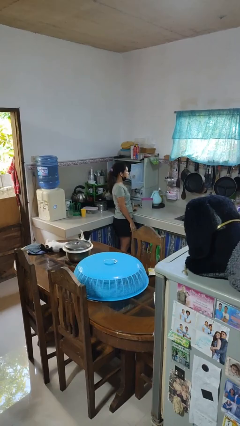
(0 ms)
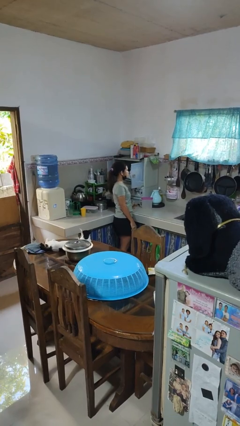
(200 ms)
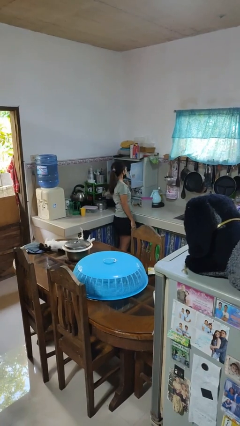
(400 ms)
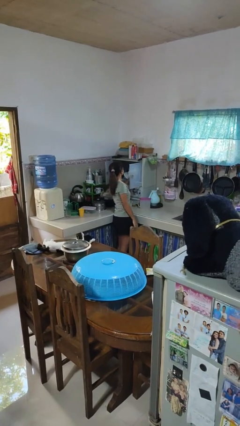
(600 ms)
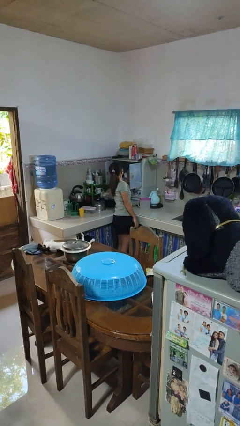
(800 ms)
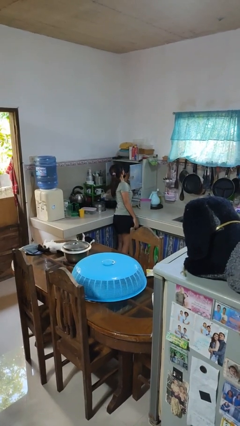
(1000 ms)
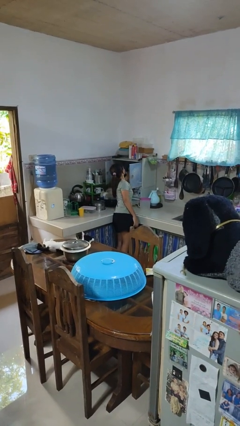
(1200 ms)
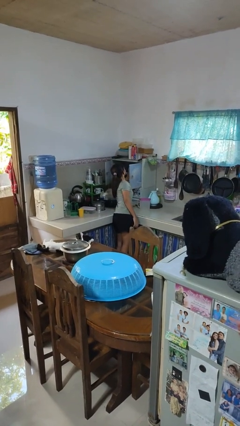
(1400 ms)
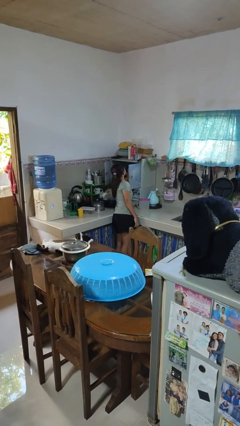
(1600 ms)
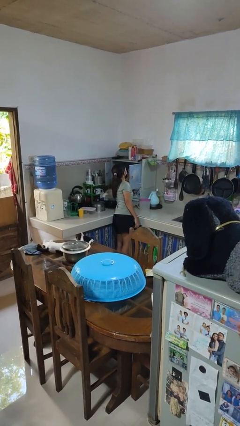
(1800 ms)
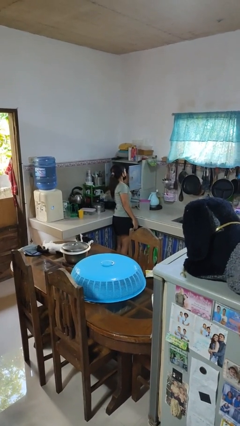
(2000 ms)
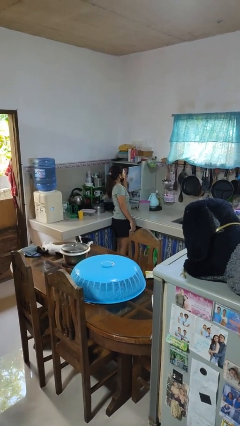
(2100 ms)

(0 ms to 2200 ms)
person searches in kitchen drawer

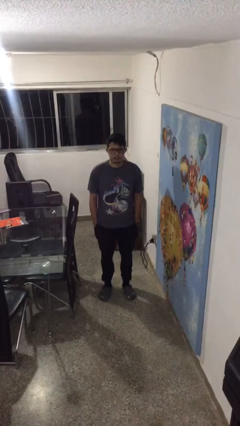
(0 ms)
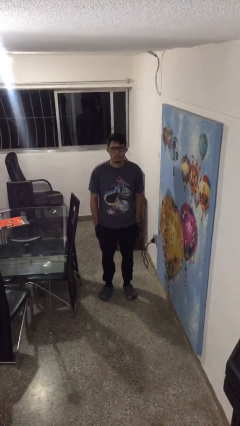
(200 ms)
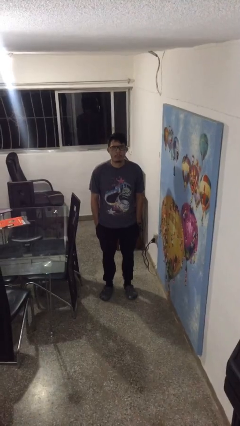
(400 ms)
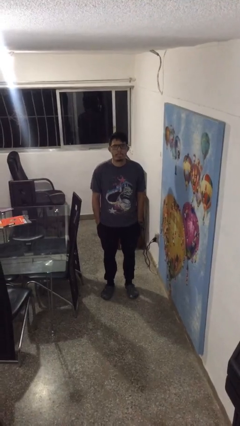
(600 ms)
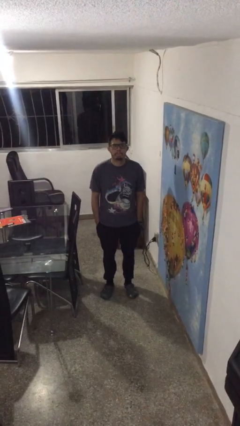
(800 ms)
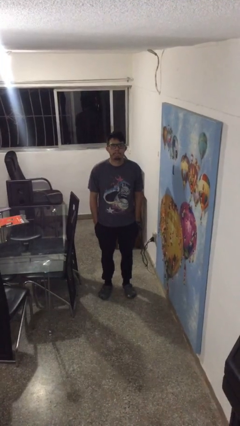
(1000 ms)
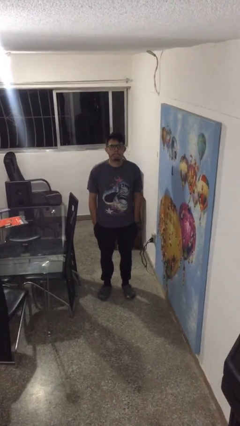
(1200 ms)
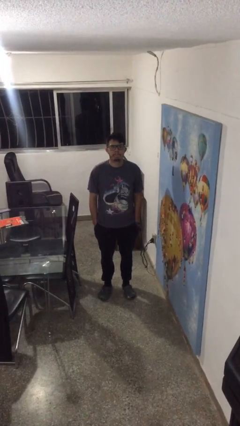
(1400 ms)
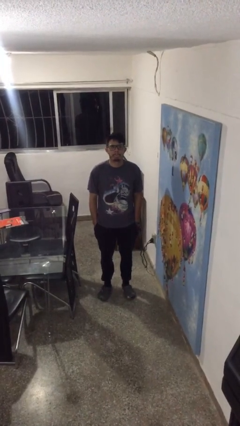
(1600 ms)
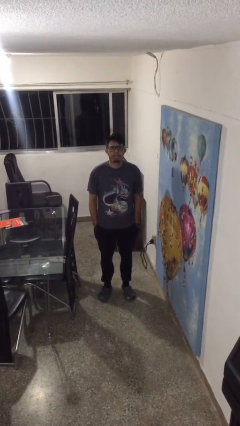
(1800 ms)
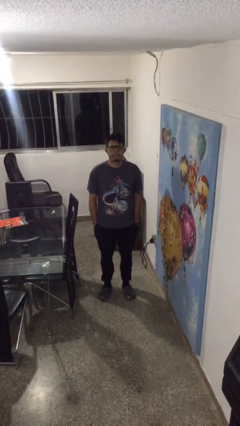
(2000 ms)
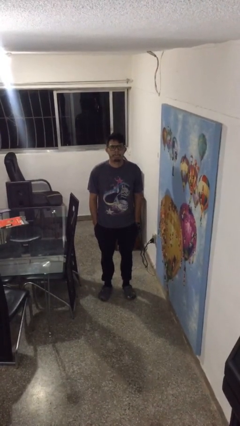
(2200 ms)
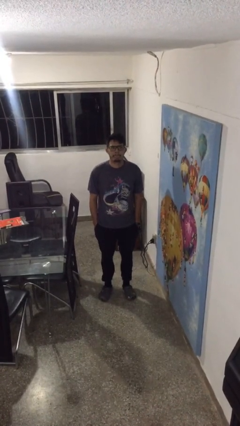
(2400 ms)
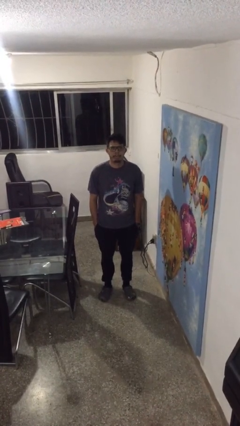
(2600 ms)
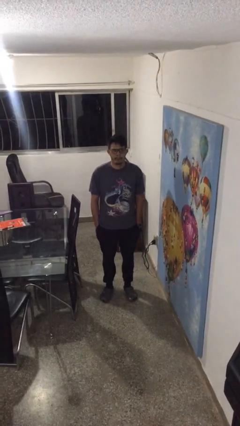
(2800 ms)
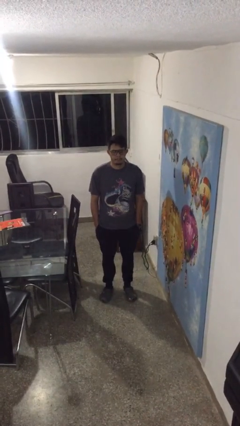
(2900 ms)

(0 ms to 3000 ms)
person sticks out tongue

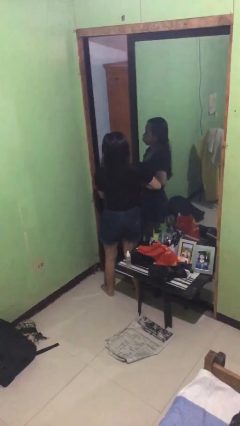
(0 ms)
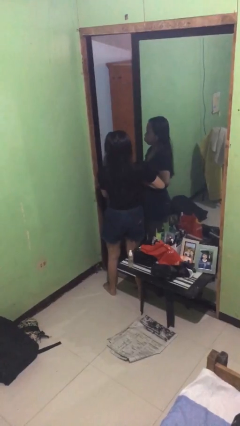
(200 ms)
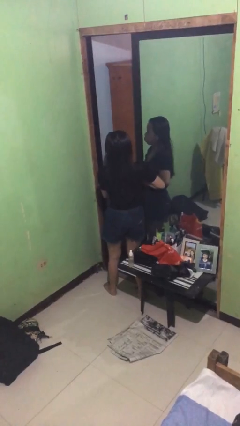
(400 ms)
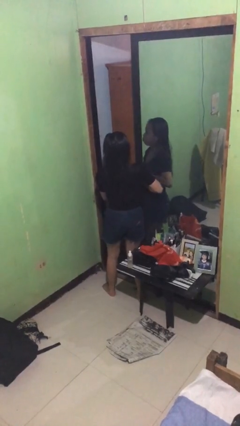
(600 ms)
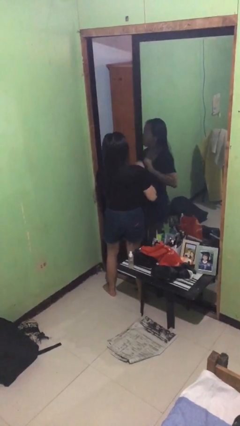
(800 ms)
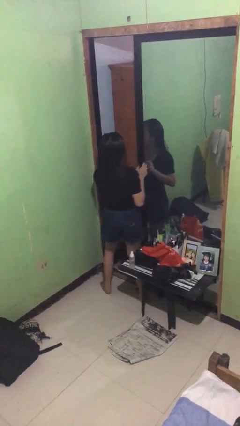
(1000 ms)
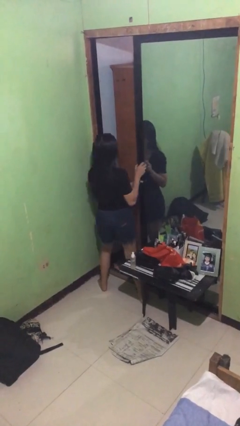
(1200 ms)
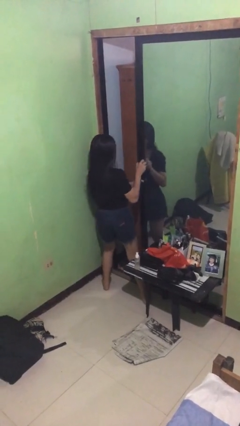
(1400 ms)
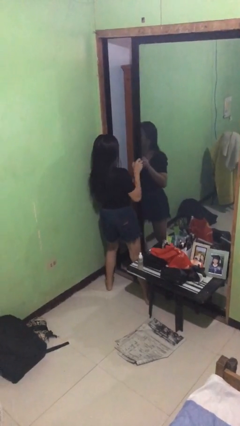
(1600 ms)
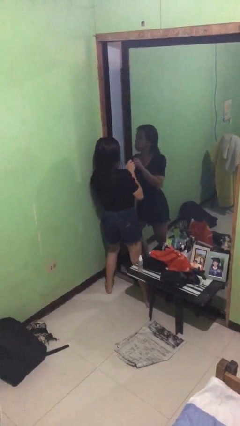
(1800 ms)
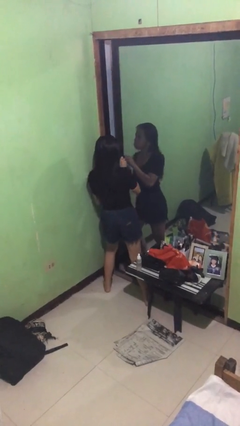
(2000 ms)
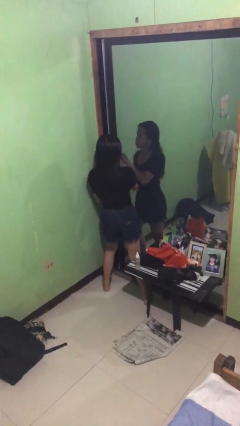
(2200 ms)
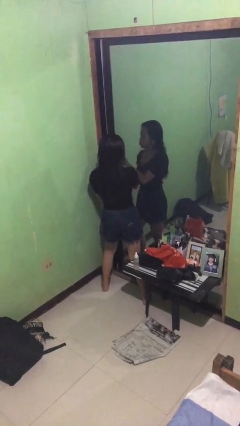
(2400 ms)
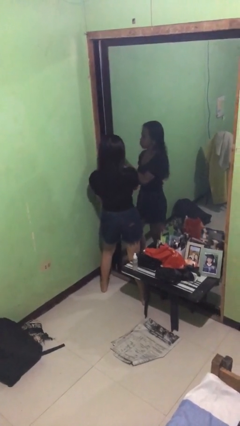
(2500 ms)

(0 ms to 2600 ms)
person closes sliding door

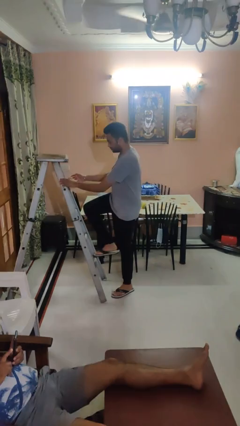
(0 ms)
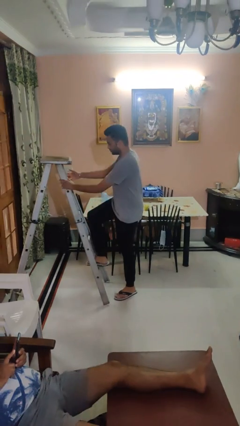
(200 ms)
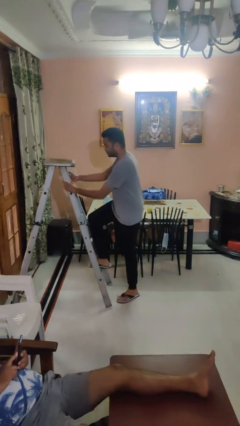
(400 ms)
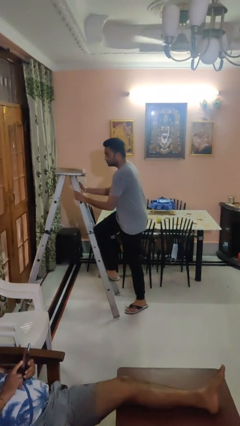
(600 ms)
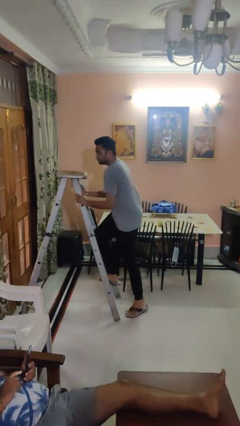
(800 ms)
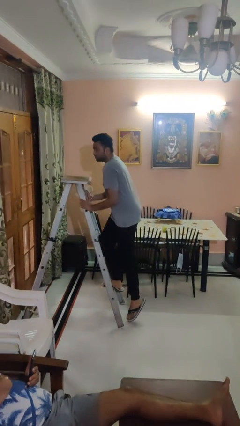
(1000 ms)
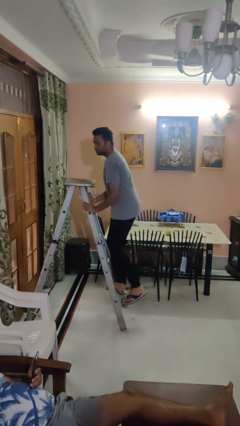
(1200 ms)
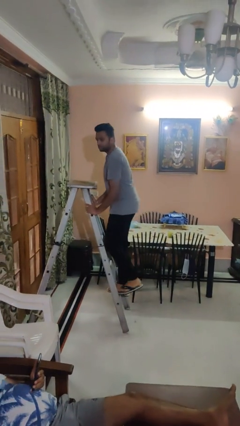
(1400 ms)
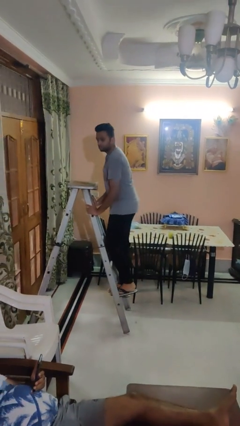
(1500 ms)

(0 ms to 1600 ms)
person climbs up ladder

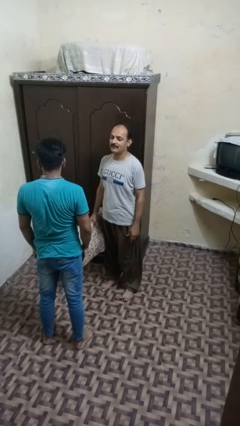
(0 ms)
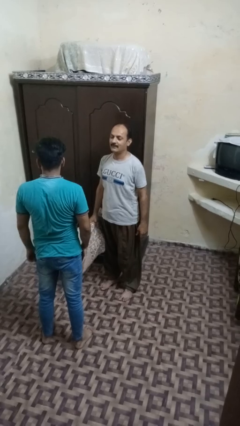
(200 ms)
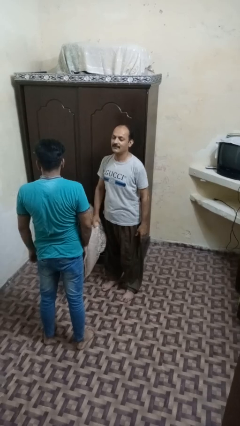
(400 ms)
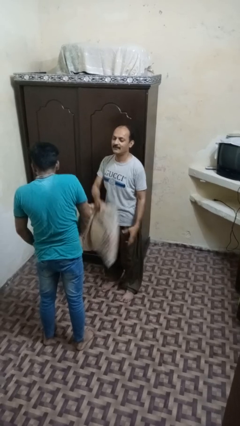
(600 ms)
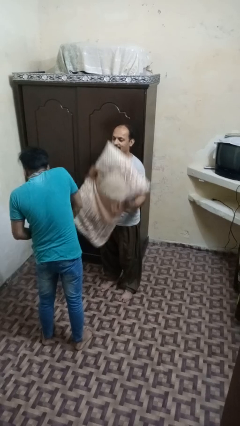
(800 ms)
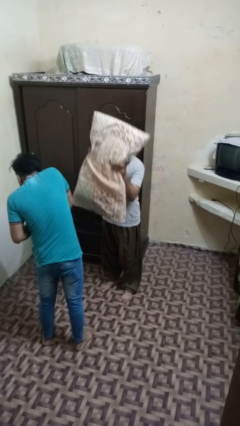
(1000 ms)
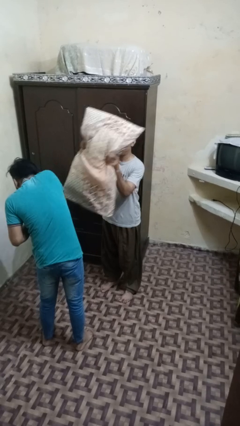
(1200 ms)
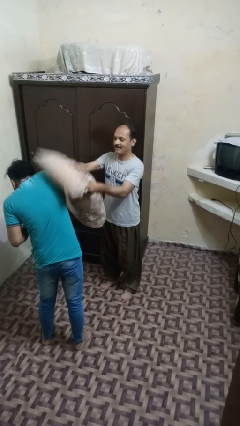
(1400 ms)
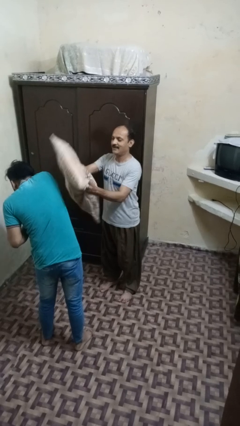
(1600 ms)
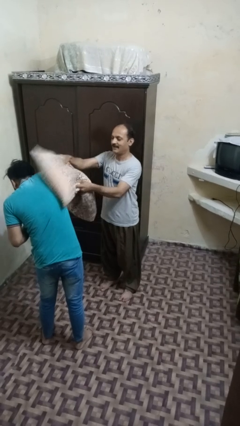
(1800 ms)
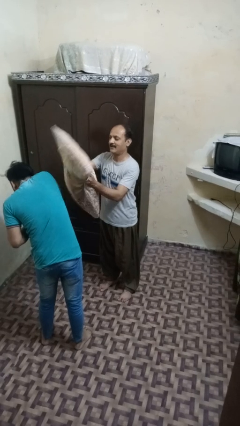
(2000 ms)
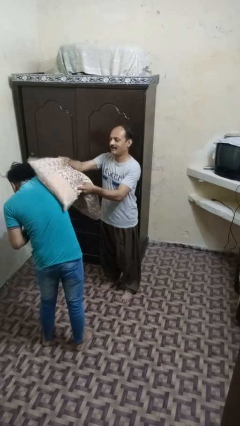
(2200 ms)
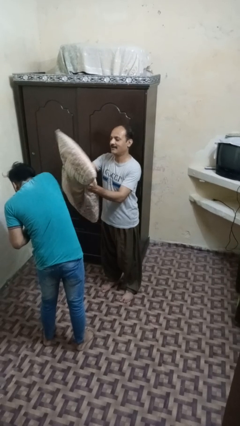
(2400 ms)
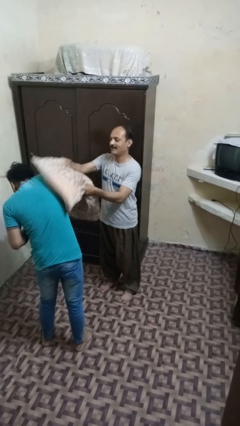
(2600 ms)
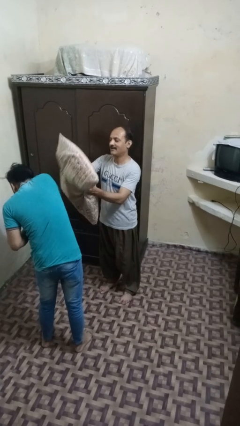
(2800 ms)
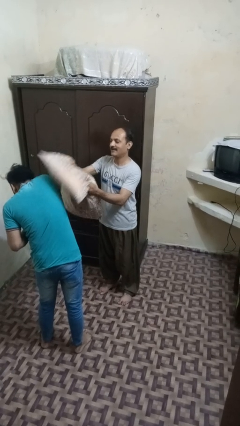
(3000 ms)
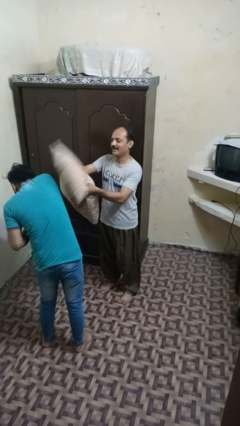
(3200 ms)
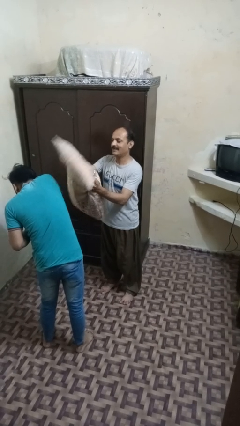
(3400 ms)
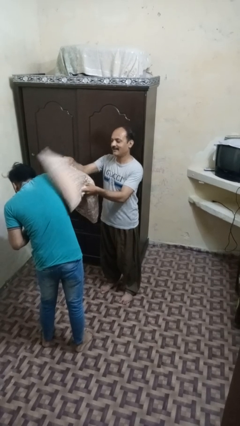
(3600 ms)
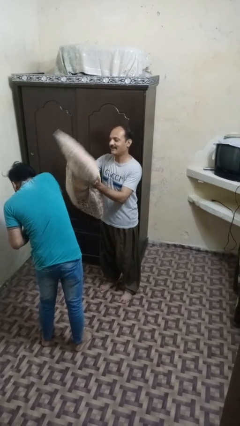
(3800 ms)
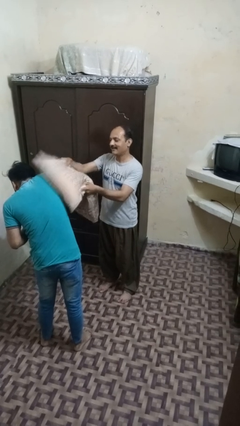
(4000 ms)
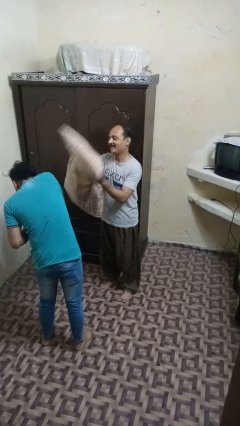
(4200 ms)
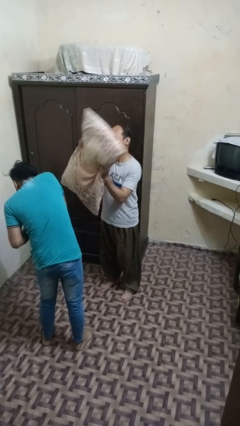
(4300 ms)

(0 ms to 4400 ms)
person hits person with pillow

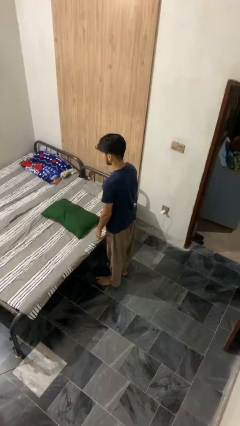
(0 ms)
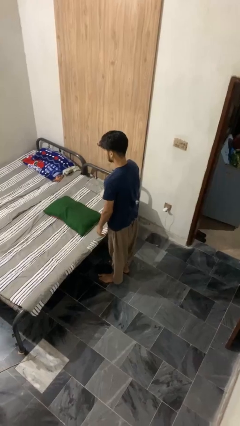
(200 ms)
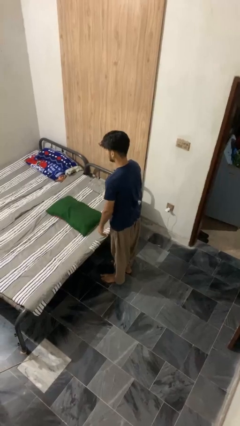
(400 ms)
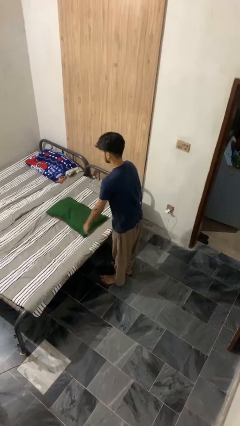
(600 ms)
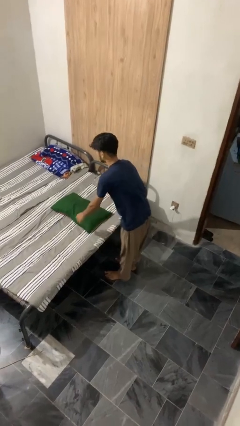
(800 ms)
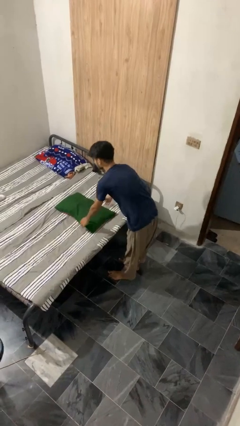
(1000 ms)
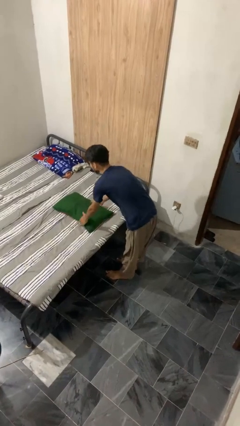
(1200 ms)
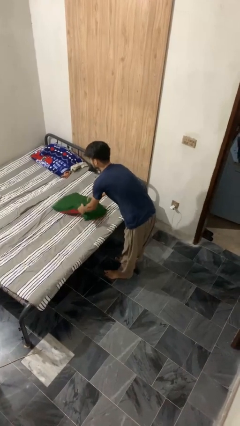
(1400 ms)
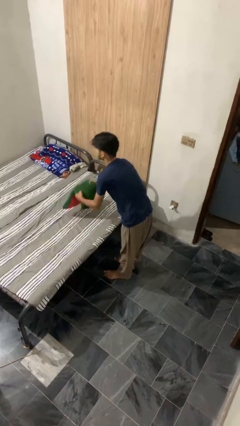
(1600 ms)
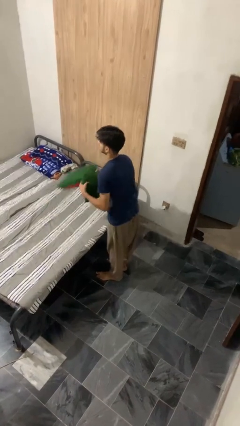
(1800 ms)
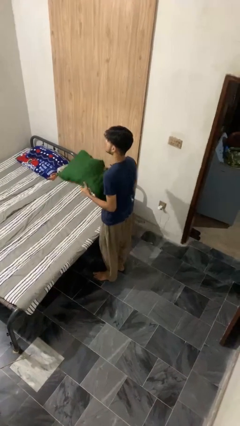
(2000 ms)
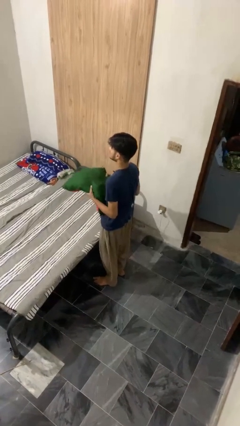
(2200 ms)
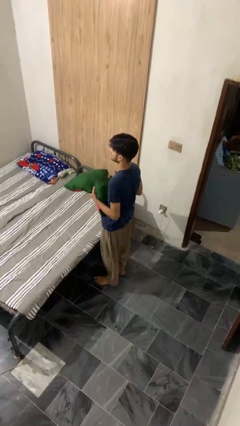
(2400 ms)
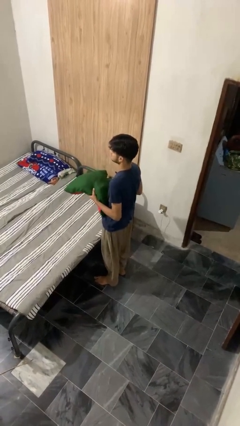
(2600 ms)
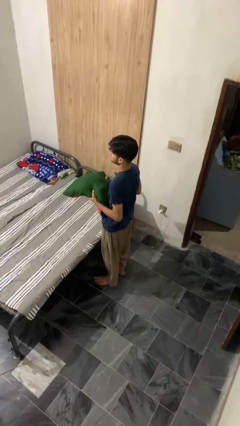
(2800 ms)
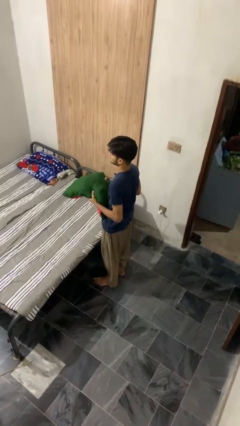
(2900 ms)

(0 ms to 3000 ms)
person picks up object from bed

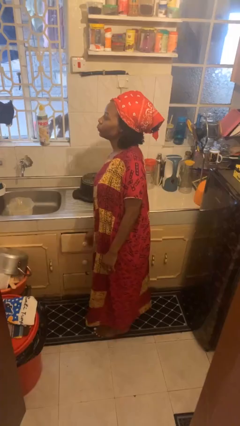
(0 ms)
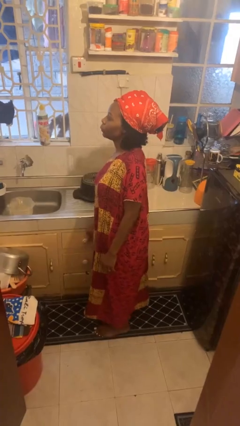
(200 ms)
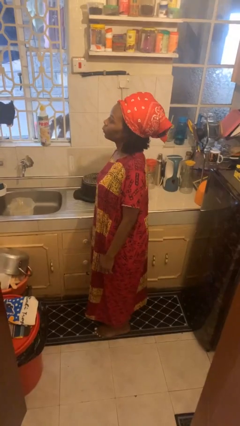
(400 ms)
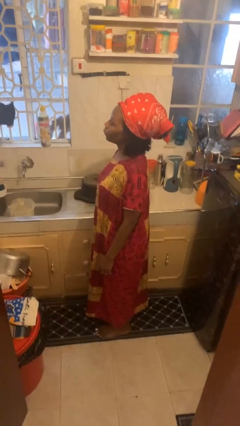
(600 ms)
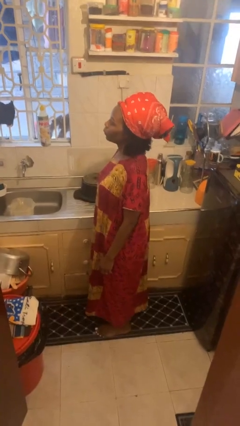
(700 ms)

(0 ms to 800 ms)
person closes kitchen drawer
